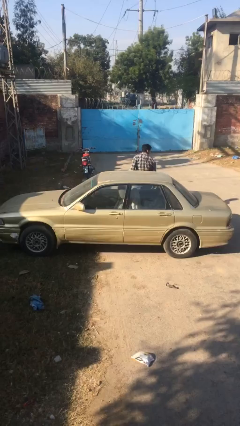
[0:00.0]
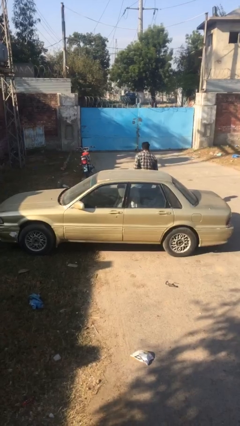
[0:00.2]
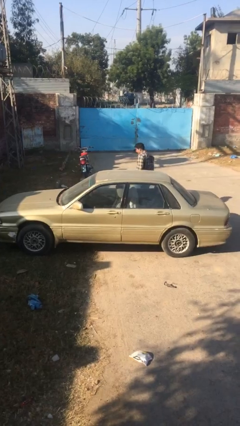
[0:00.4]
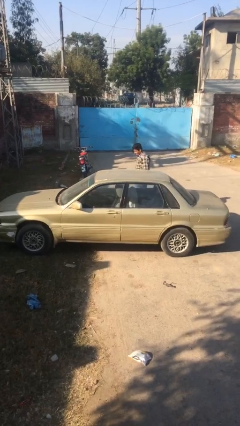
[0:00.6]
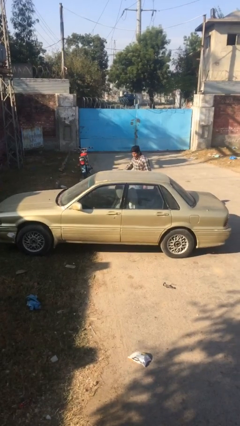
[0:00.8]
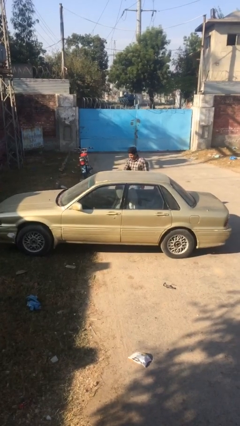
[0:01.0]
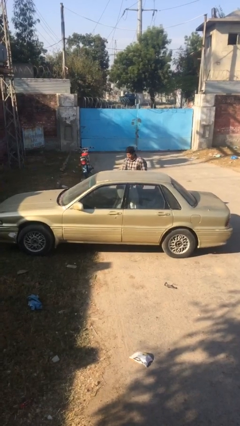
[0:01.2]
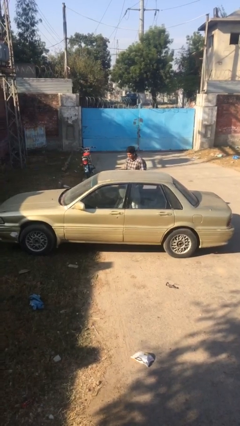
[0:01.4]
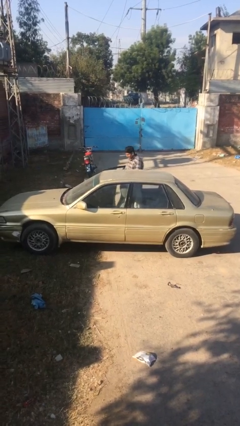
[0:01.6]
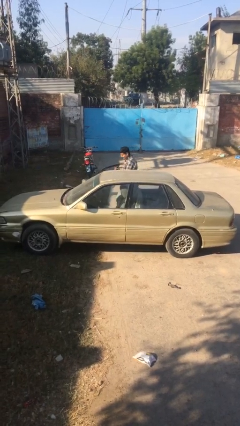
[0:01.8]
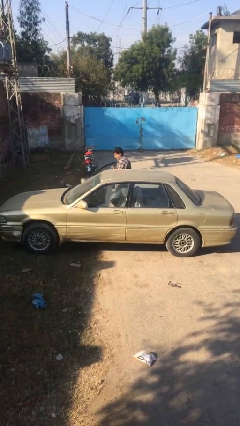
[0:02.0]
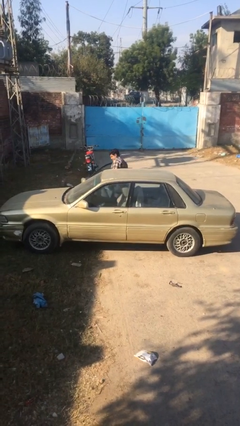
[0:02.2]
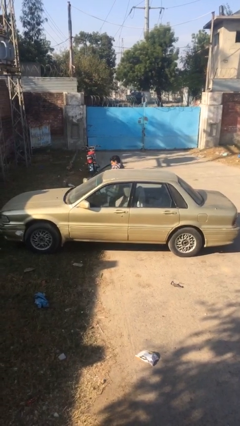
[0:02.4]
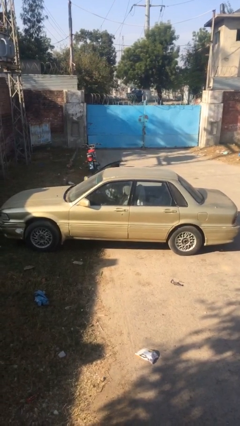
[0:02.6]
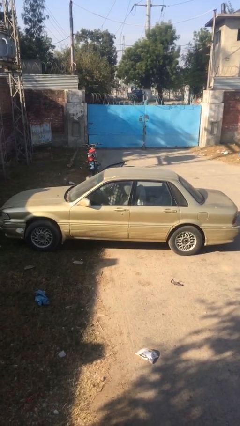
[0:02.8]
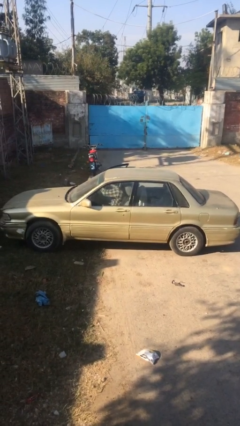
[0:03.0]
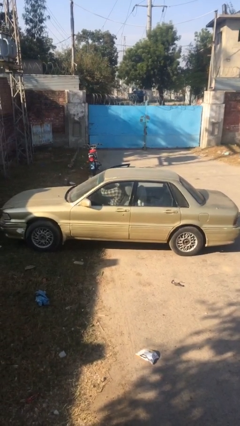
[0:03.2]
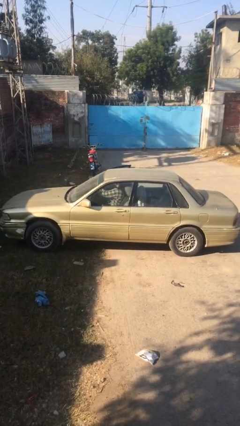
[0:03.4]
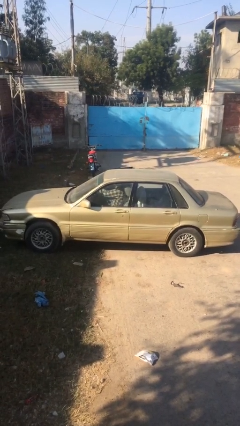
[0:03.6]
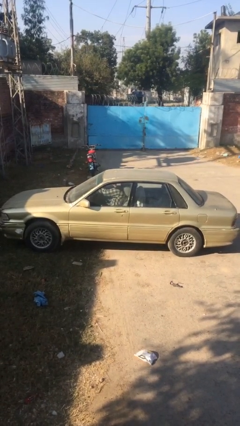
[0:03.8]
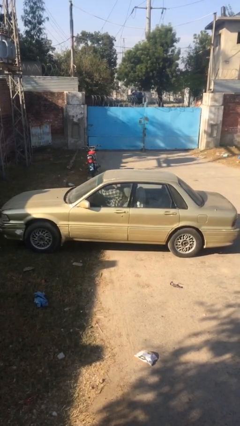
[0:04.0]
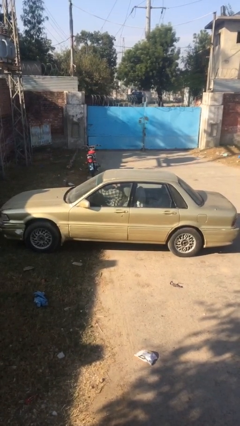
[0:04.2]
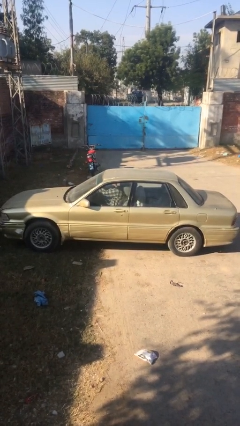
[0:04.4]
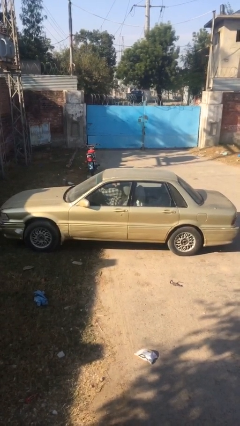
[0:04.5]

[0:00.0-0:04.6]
car picks up person

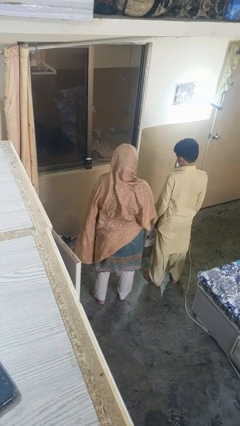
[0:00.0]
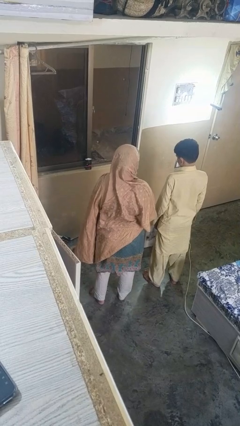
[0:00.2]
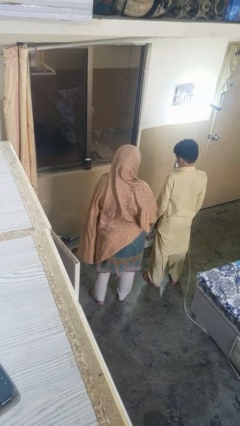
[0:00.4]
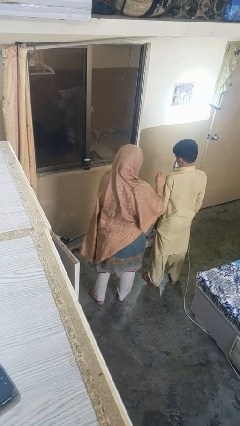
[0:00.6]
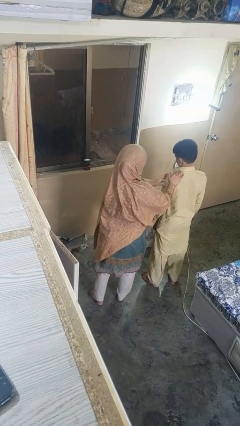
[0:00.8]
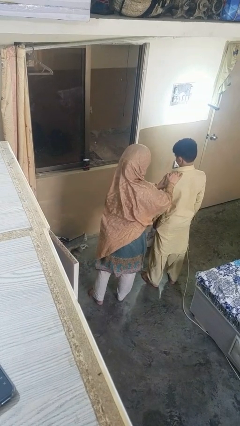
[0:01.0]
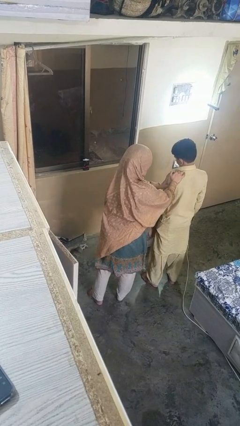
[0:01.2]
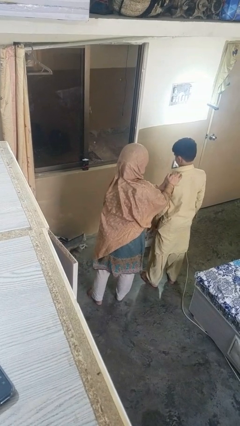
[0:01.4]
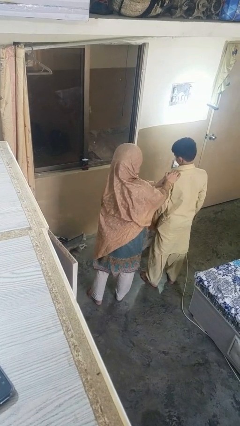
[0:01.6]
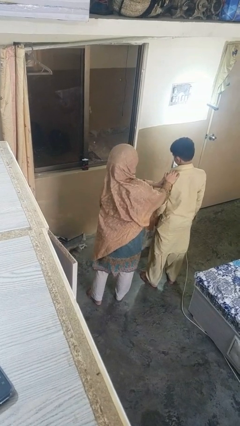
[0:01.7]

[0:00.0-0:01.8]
person shoves person

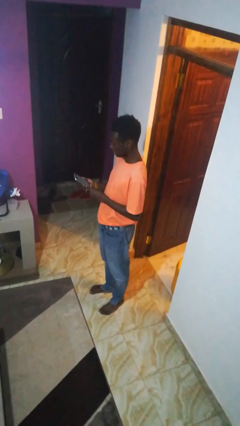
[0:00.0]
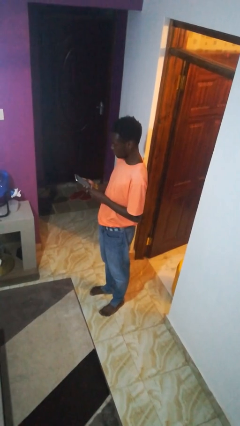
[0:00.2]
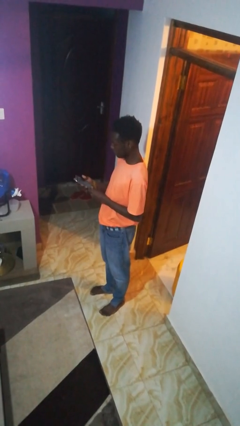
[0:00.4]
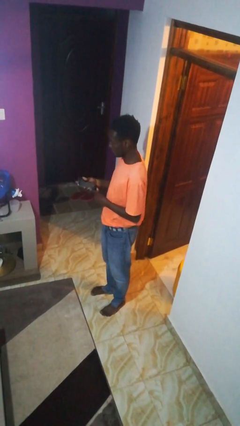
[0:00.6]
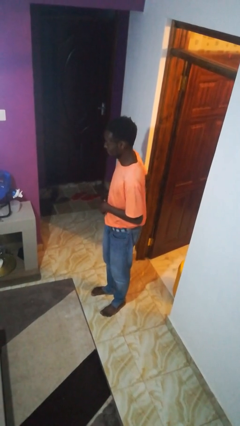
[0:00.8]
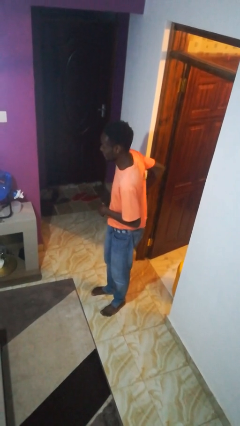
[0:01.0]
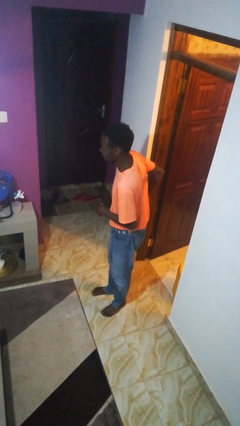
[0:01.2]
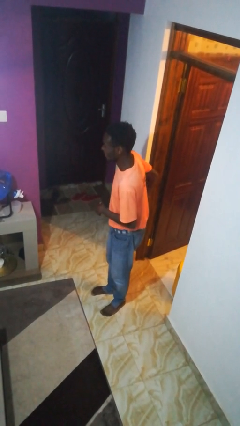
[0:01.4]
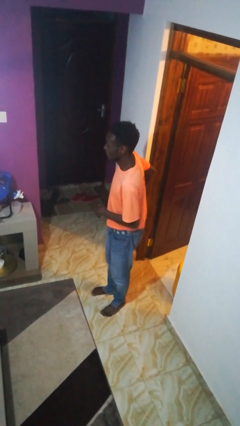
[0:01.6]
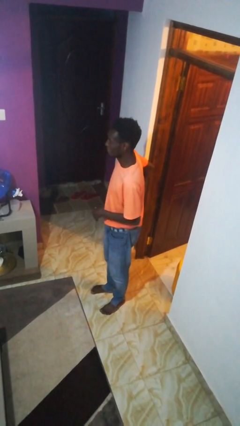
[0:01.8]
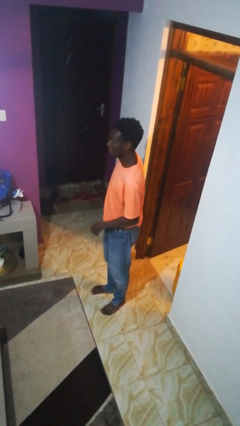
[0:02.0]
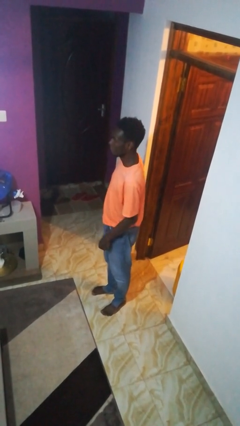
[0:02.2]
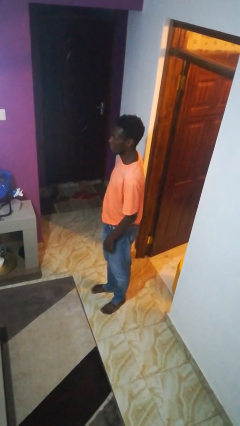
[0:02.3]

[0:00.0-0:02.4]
person puts phone into pocket

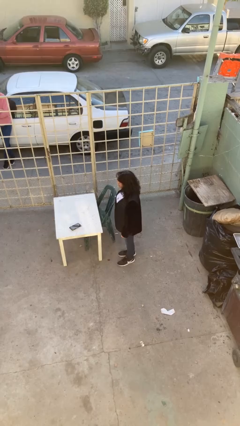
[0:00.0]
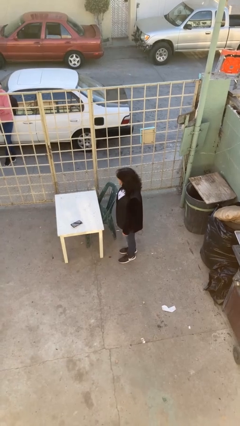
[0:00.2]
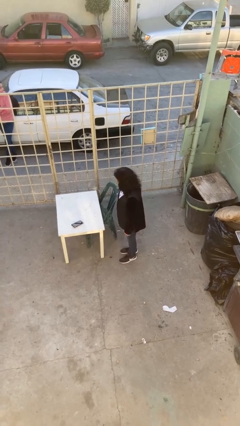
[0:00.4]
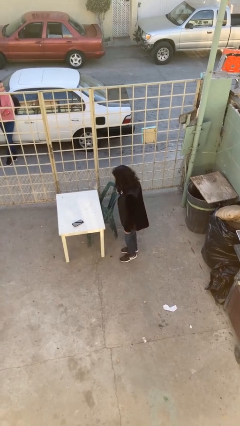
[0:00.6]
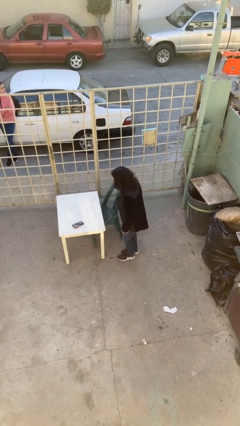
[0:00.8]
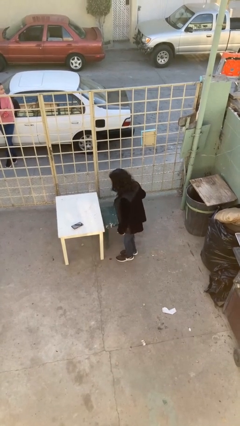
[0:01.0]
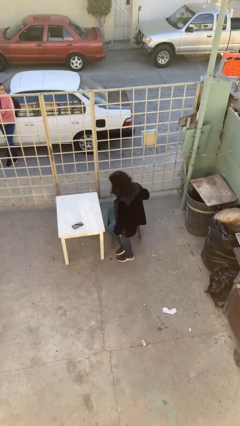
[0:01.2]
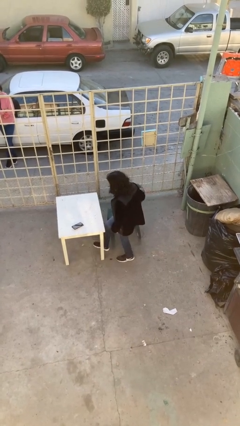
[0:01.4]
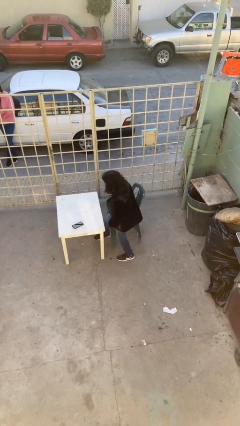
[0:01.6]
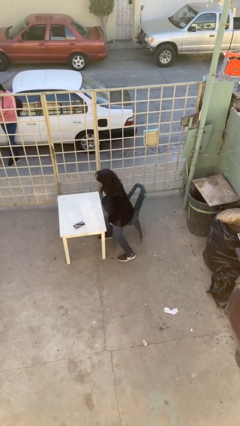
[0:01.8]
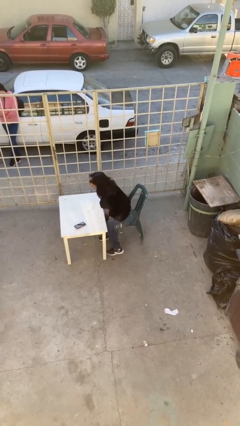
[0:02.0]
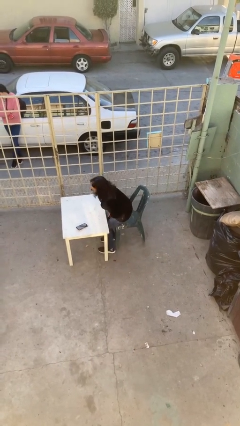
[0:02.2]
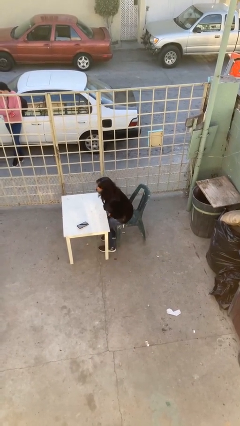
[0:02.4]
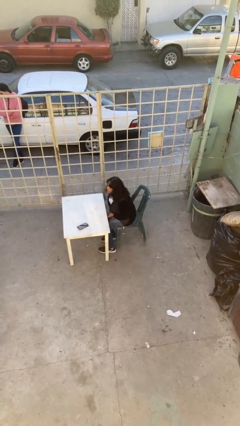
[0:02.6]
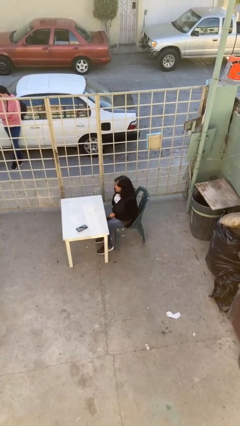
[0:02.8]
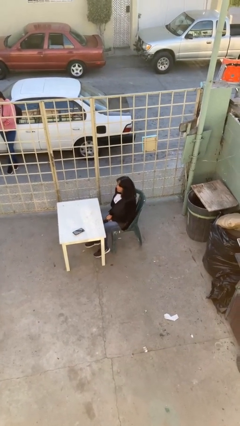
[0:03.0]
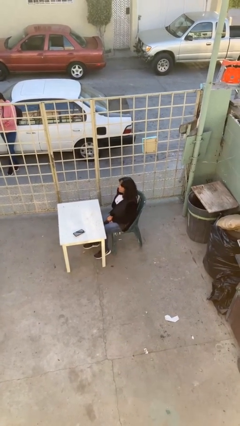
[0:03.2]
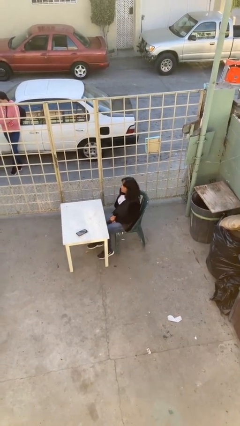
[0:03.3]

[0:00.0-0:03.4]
person sits down

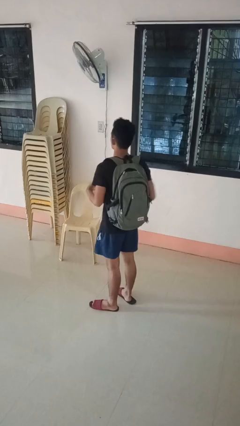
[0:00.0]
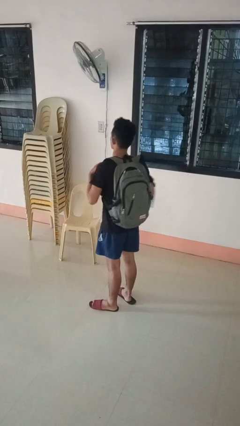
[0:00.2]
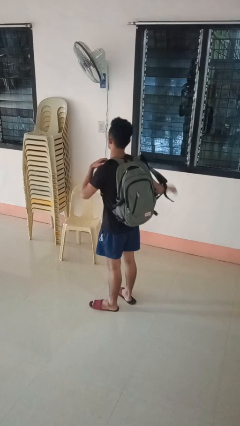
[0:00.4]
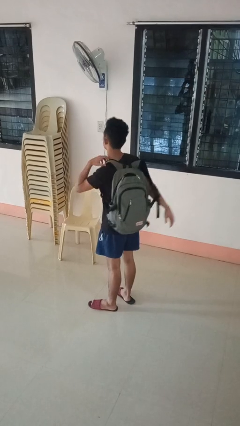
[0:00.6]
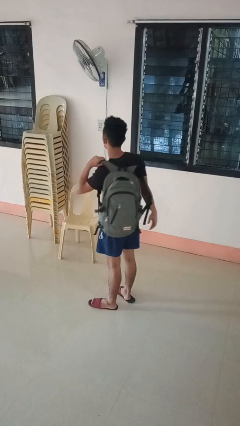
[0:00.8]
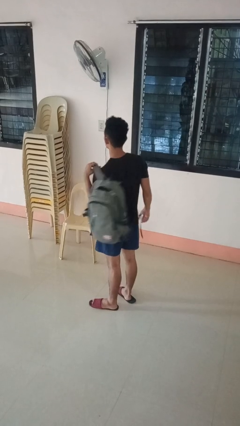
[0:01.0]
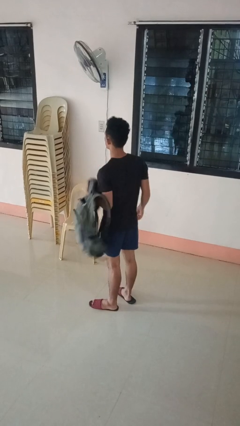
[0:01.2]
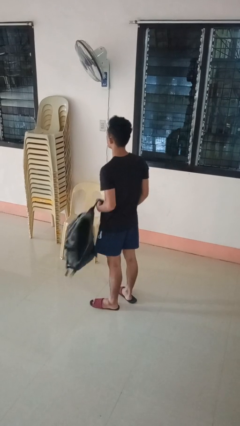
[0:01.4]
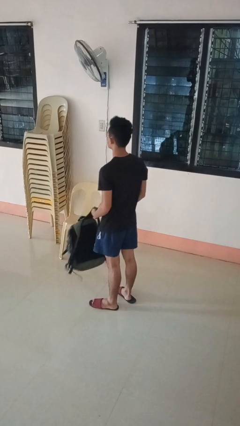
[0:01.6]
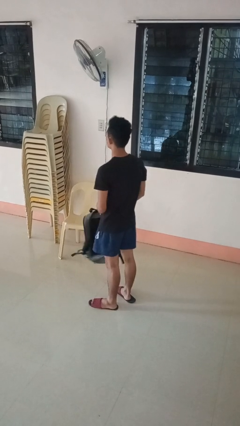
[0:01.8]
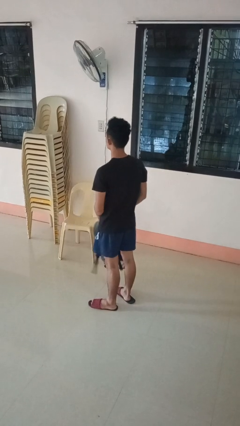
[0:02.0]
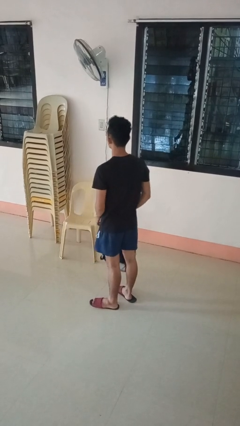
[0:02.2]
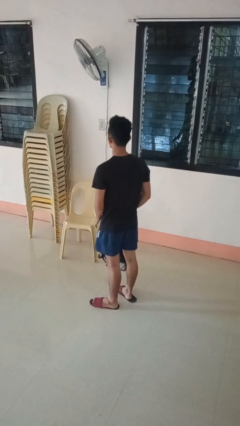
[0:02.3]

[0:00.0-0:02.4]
person takes off backpack

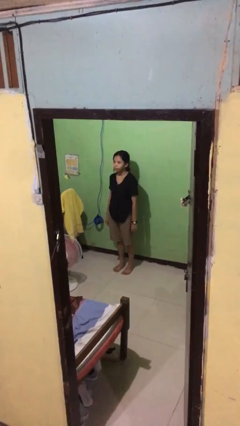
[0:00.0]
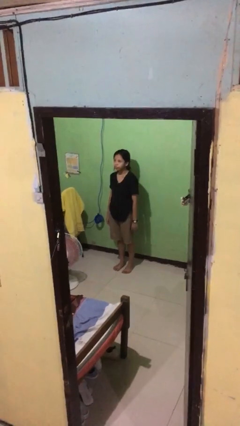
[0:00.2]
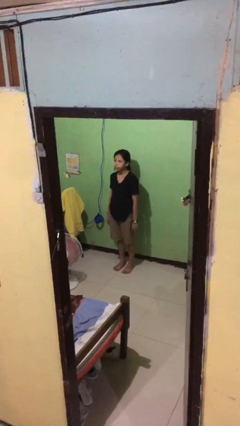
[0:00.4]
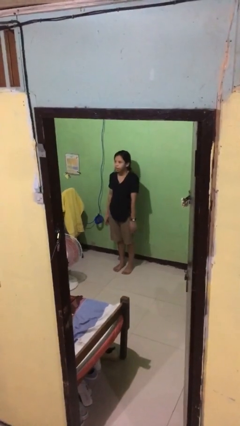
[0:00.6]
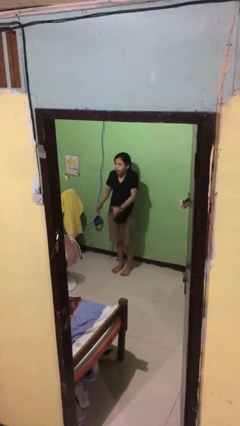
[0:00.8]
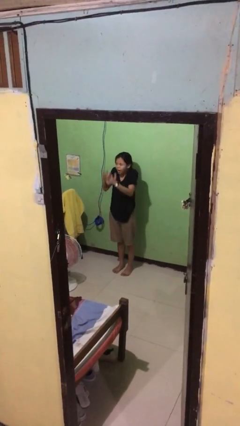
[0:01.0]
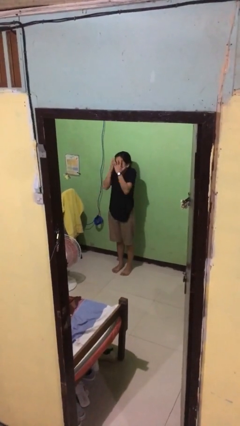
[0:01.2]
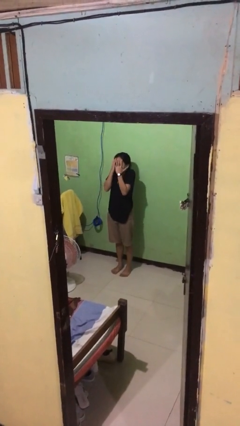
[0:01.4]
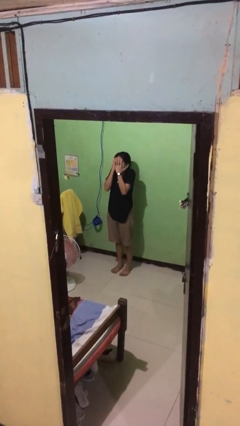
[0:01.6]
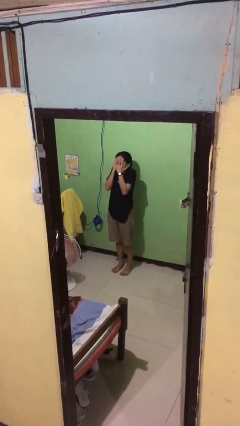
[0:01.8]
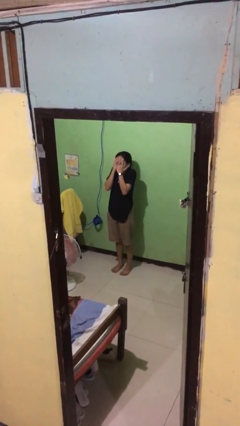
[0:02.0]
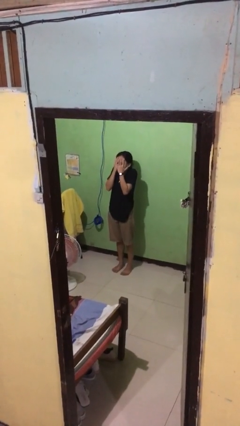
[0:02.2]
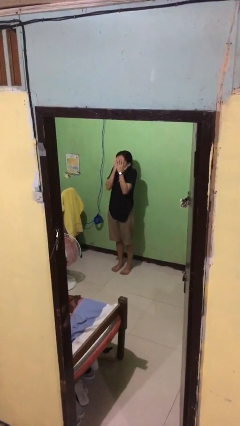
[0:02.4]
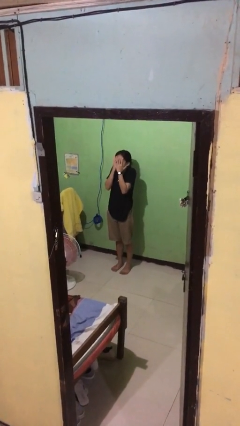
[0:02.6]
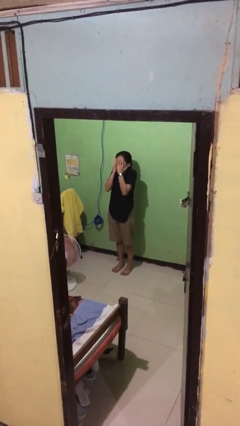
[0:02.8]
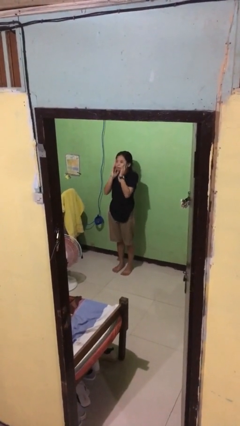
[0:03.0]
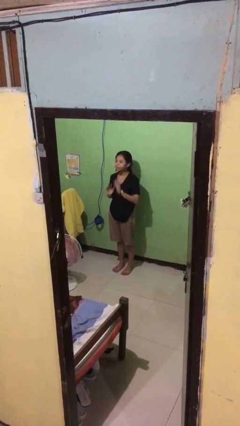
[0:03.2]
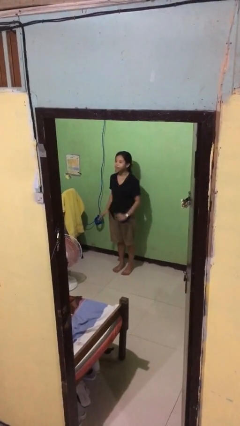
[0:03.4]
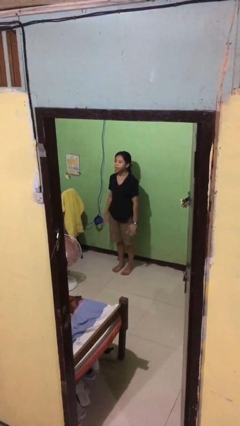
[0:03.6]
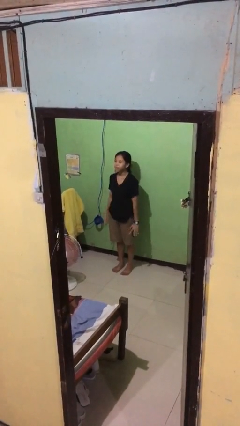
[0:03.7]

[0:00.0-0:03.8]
person covers face with hands
